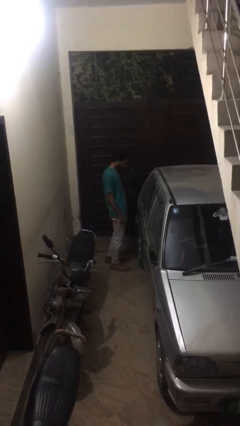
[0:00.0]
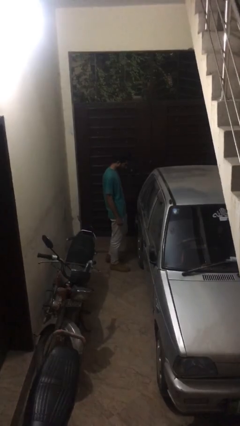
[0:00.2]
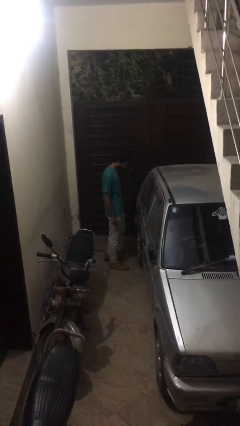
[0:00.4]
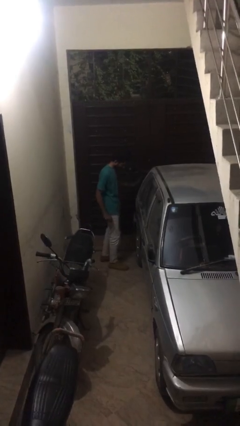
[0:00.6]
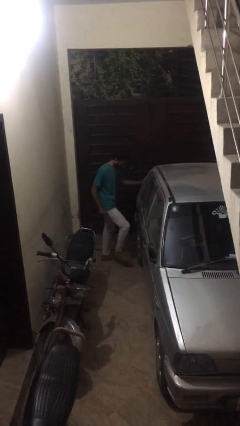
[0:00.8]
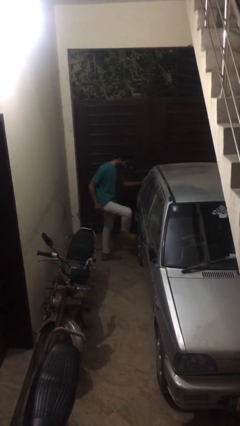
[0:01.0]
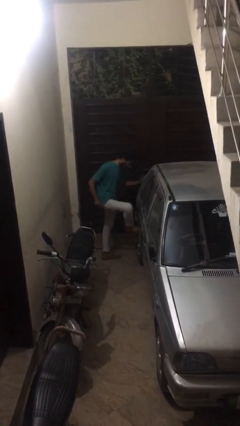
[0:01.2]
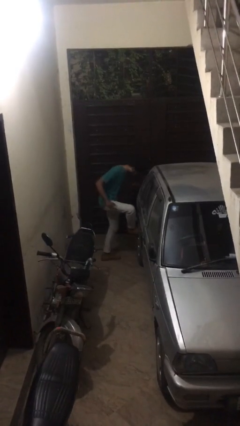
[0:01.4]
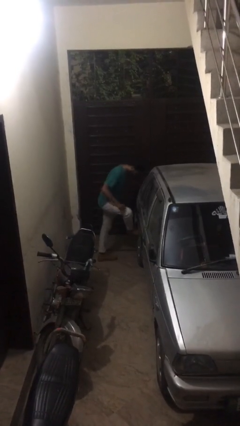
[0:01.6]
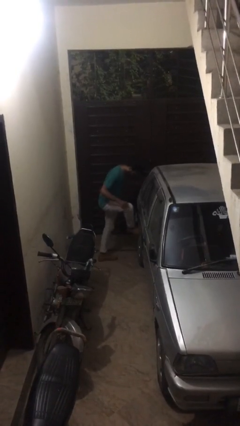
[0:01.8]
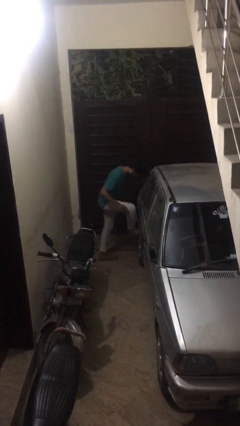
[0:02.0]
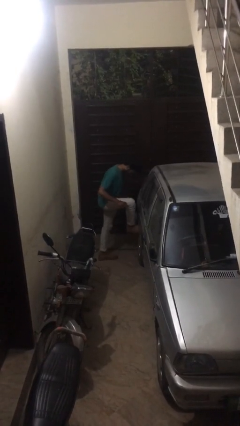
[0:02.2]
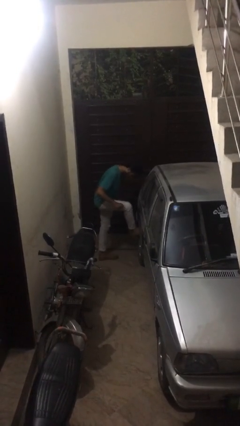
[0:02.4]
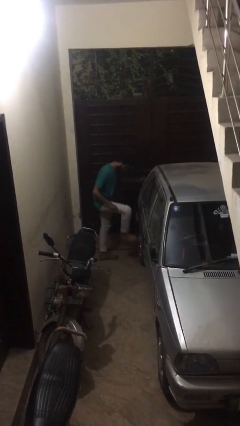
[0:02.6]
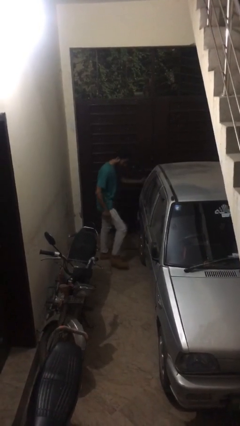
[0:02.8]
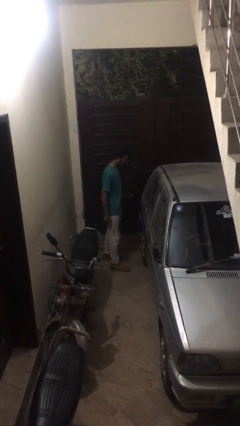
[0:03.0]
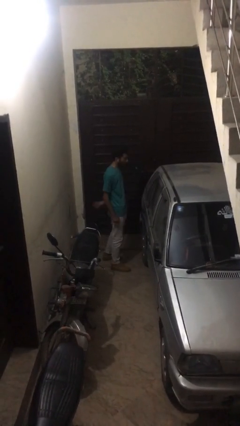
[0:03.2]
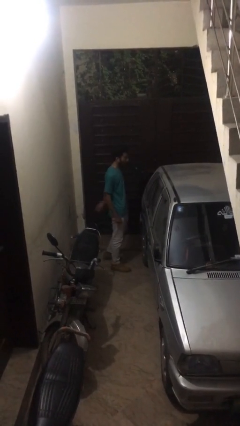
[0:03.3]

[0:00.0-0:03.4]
person kicks car tires

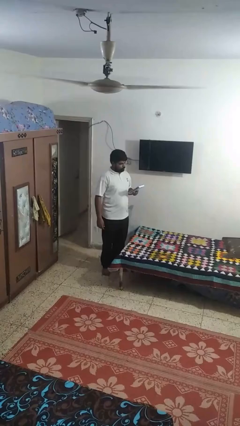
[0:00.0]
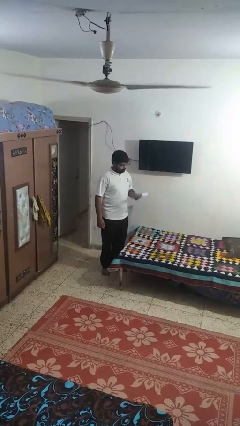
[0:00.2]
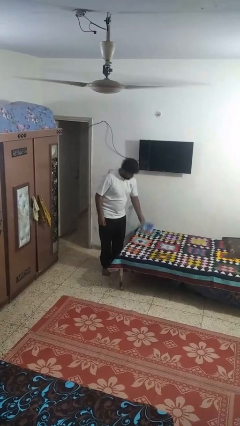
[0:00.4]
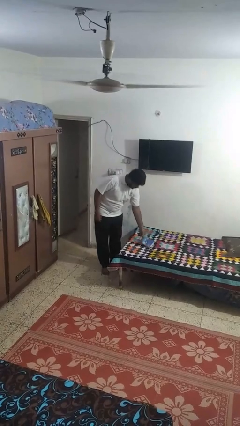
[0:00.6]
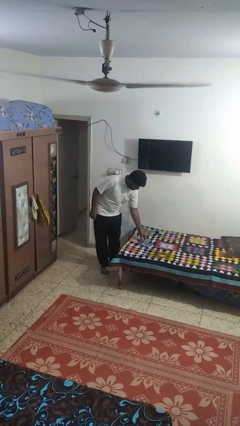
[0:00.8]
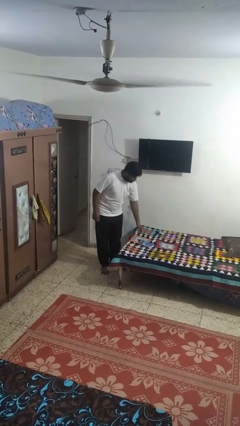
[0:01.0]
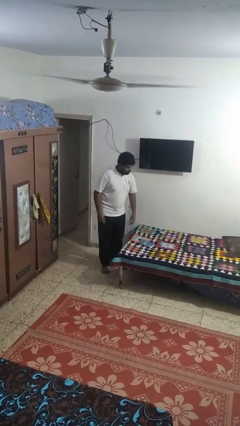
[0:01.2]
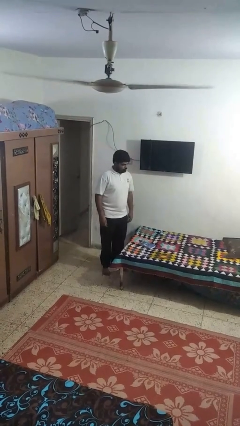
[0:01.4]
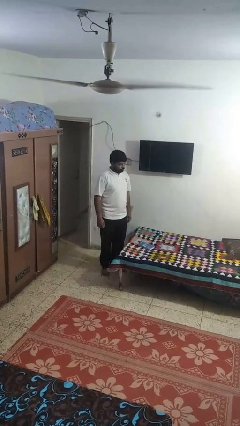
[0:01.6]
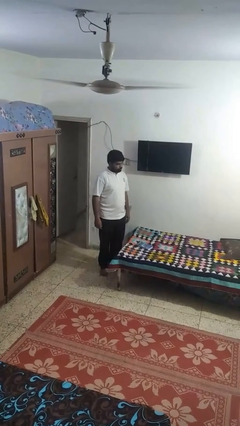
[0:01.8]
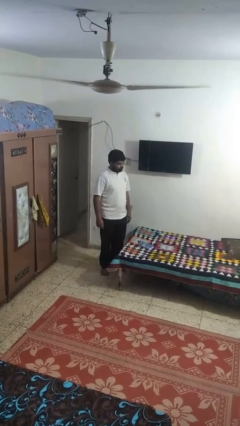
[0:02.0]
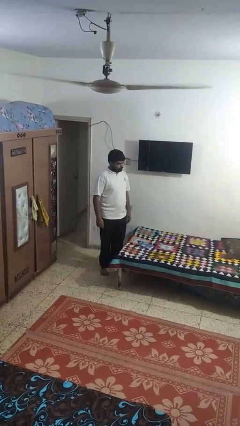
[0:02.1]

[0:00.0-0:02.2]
person puts down object on bed

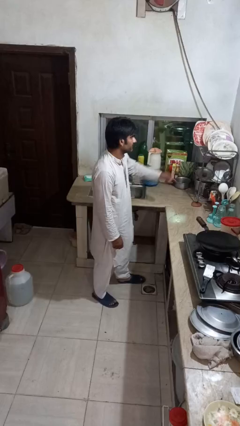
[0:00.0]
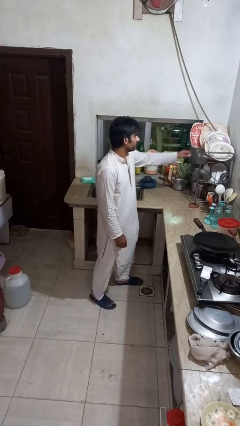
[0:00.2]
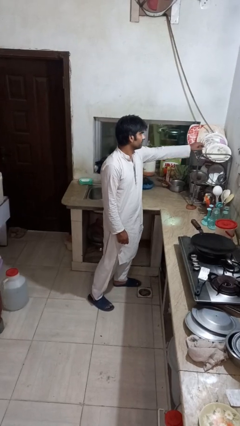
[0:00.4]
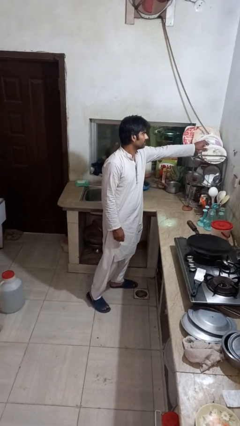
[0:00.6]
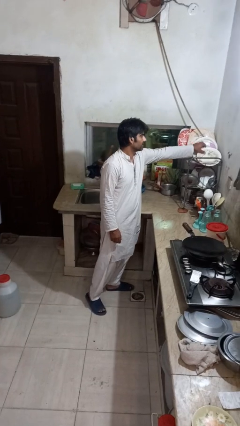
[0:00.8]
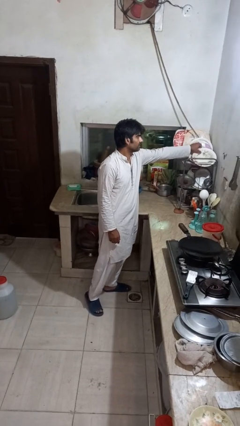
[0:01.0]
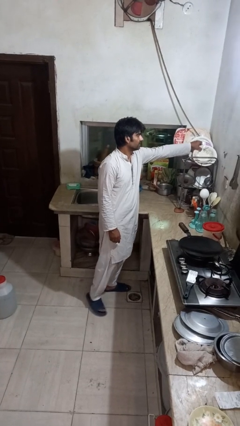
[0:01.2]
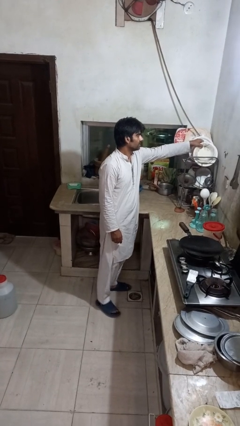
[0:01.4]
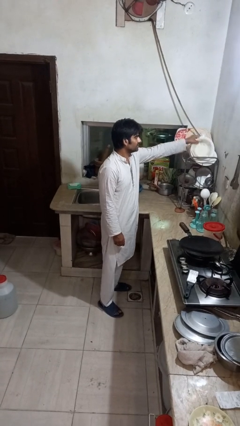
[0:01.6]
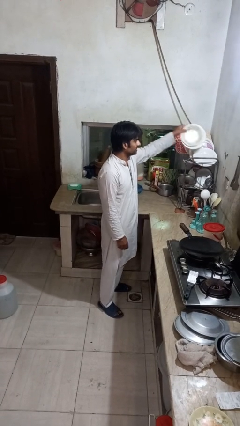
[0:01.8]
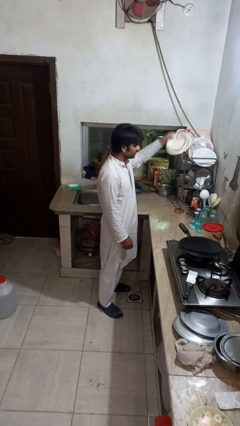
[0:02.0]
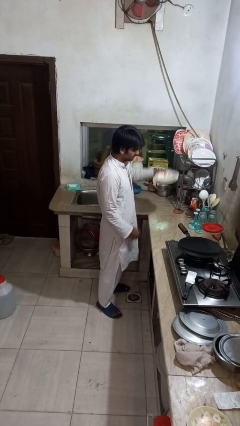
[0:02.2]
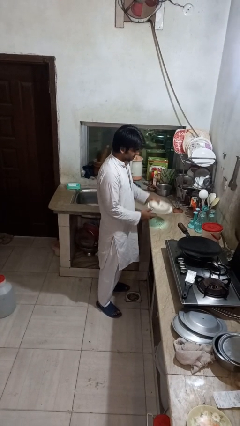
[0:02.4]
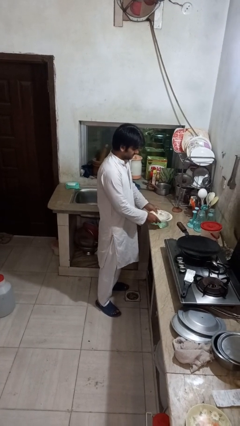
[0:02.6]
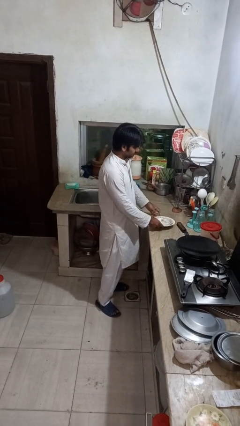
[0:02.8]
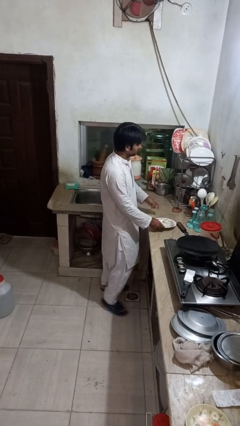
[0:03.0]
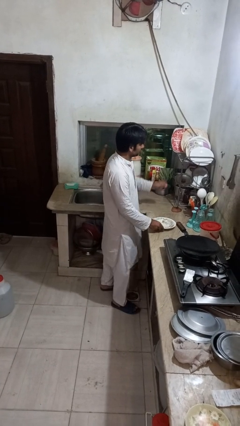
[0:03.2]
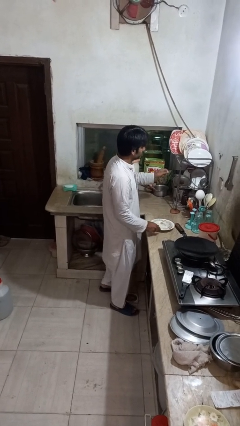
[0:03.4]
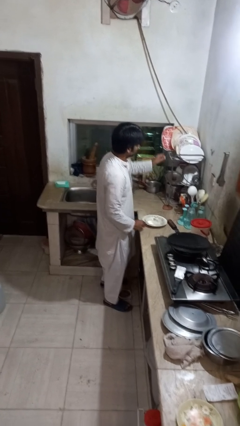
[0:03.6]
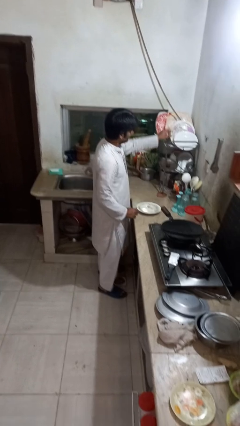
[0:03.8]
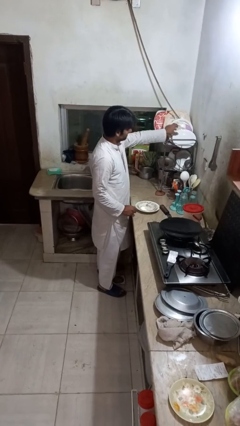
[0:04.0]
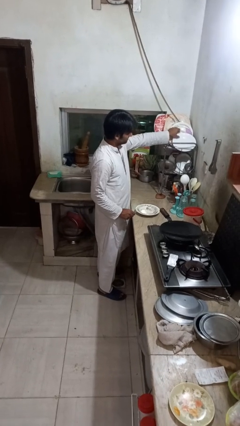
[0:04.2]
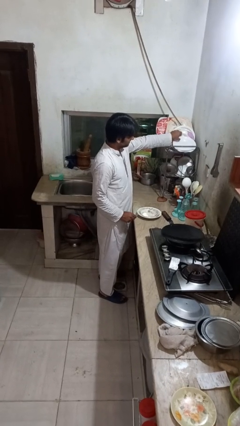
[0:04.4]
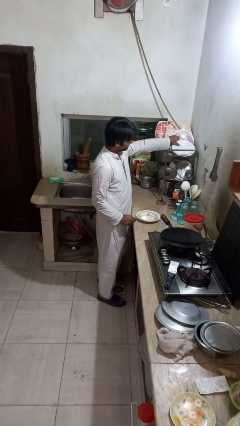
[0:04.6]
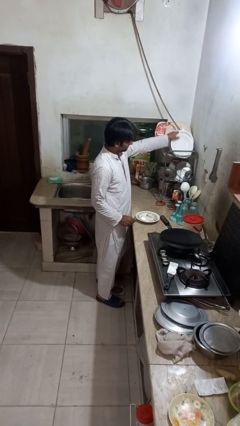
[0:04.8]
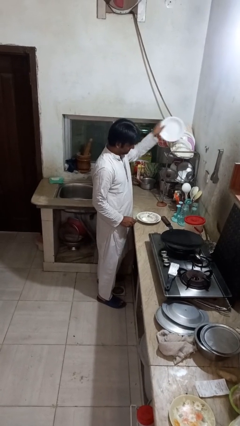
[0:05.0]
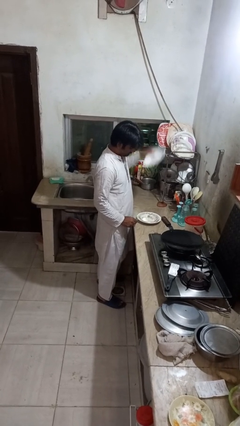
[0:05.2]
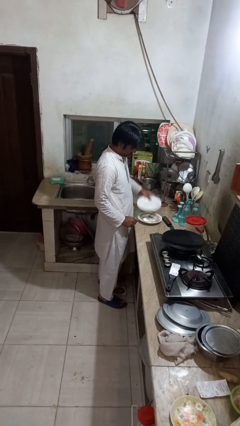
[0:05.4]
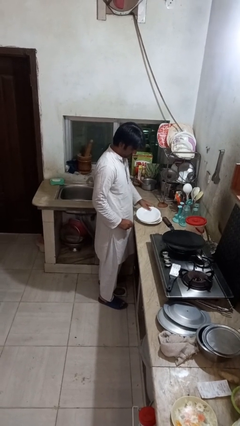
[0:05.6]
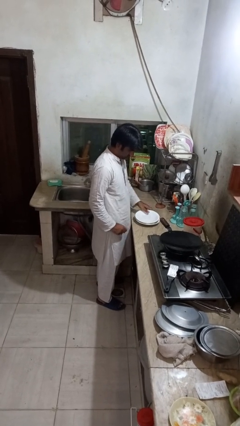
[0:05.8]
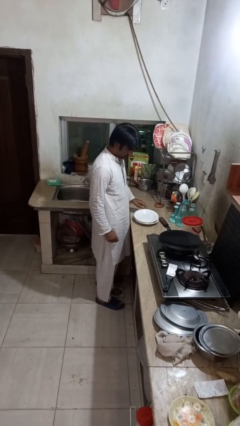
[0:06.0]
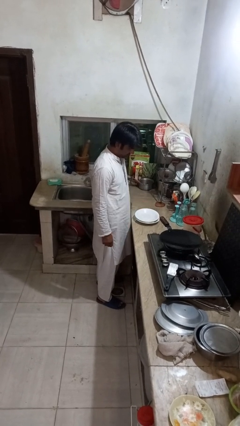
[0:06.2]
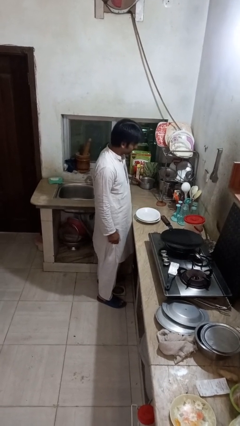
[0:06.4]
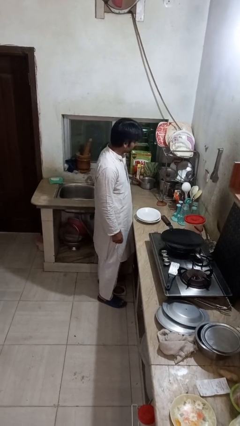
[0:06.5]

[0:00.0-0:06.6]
person unloads dishwasher

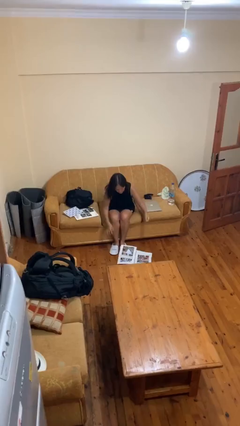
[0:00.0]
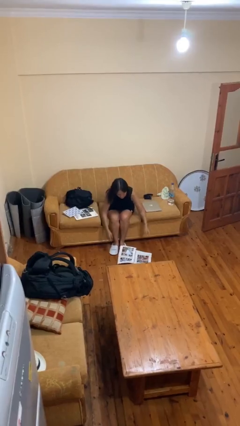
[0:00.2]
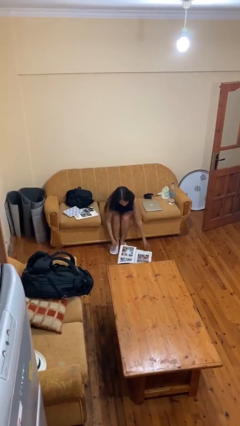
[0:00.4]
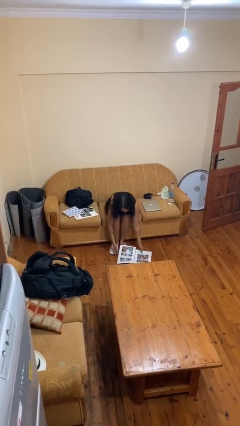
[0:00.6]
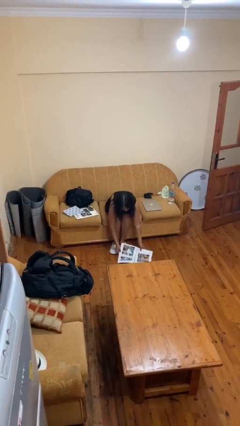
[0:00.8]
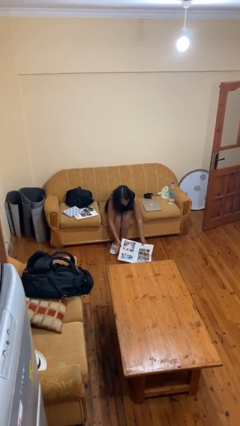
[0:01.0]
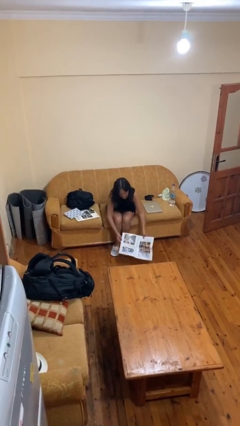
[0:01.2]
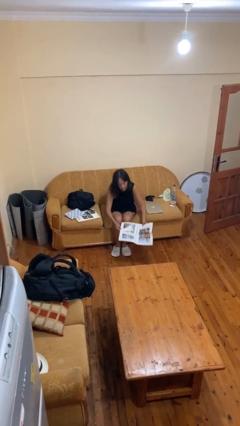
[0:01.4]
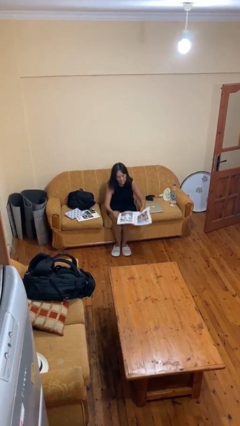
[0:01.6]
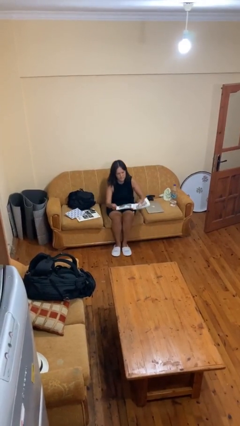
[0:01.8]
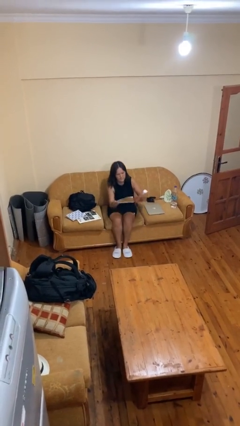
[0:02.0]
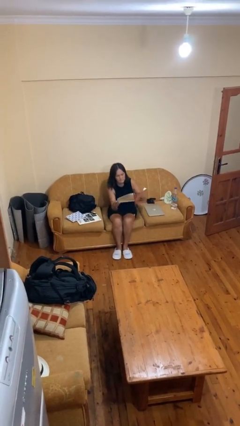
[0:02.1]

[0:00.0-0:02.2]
person picks up object from floor

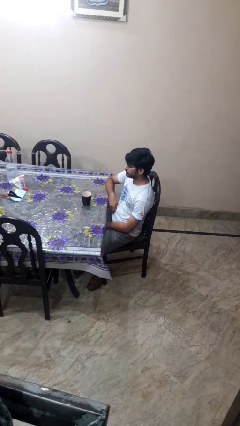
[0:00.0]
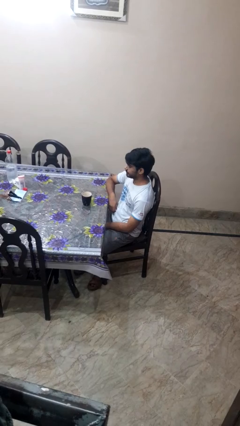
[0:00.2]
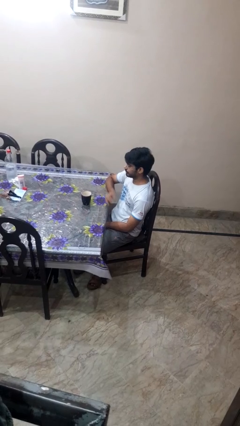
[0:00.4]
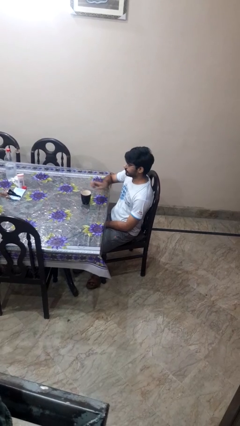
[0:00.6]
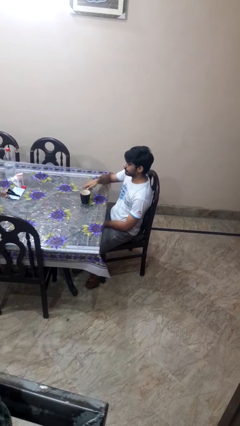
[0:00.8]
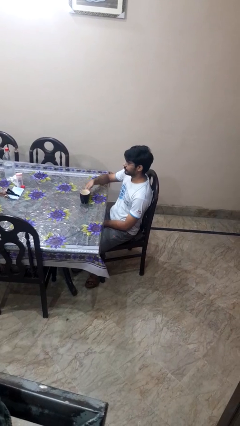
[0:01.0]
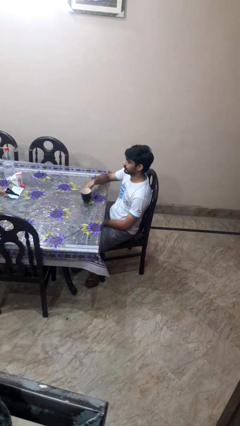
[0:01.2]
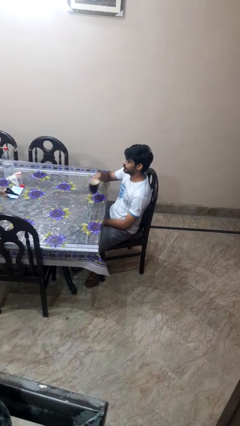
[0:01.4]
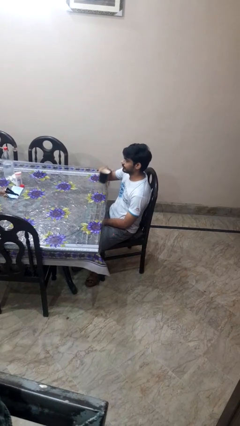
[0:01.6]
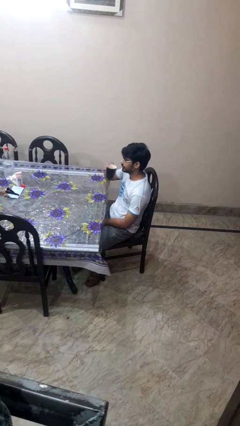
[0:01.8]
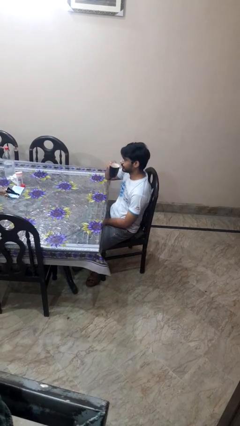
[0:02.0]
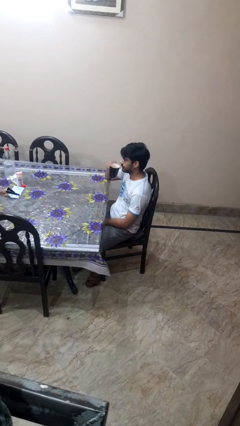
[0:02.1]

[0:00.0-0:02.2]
person picks up object from table

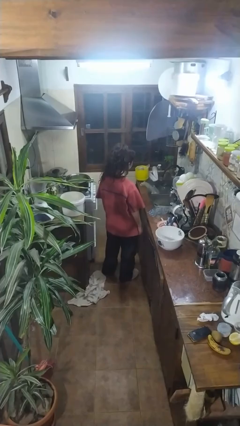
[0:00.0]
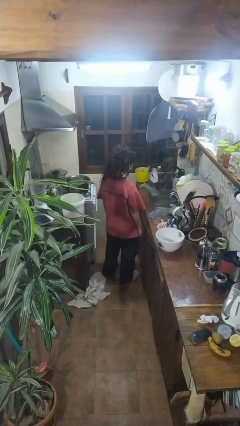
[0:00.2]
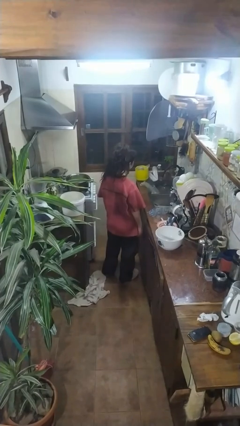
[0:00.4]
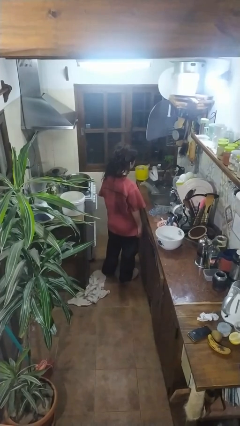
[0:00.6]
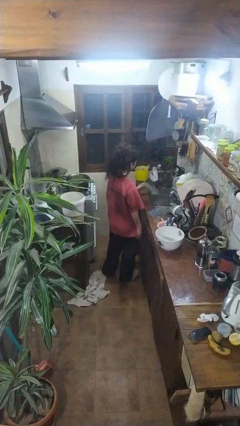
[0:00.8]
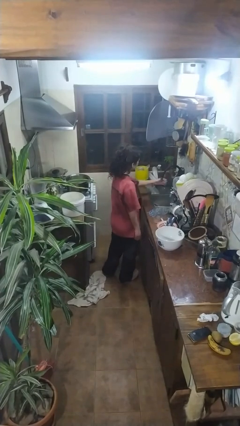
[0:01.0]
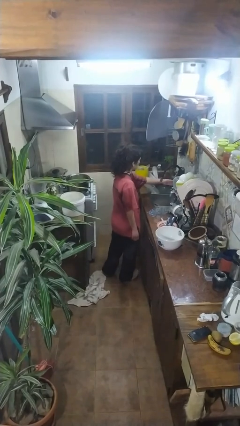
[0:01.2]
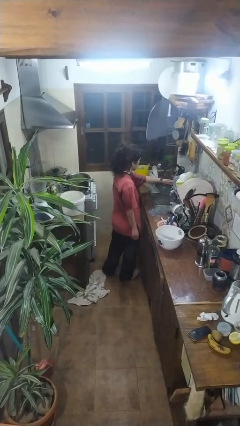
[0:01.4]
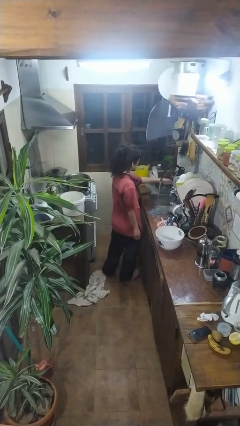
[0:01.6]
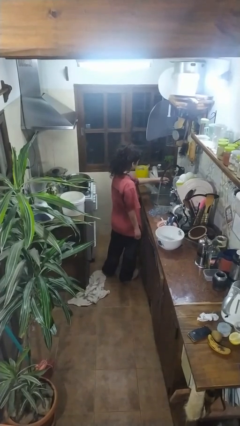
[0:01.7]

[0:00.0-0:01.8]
person turns on faucet
